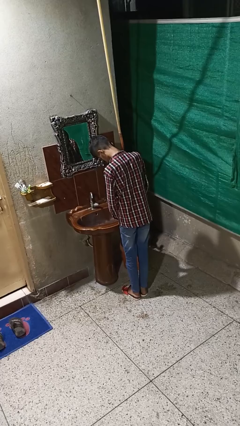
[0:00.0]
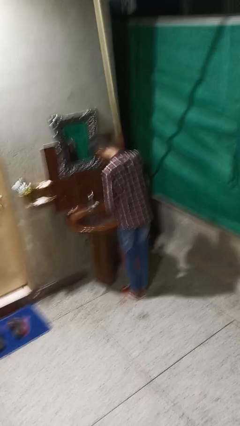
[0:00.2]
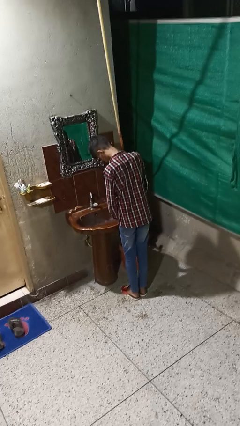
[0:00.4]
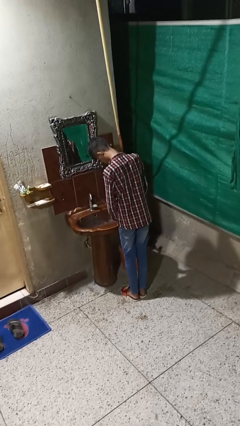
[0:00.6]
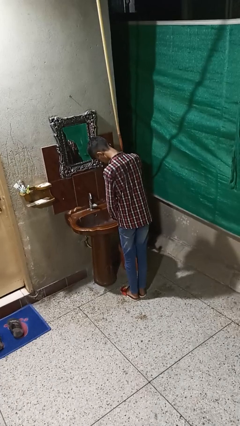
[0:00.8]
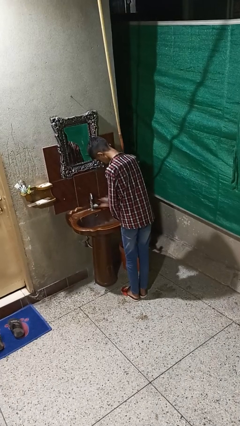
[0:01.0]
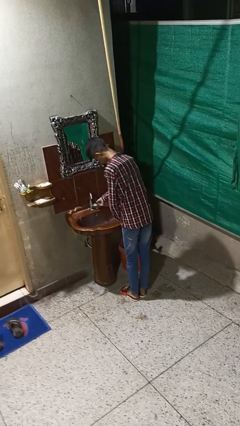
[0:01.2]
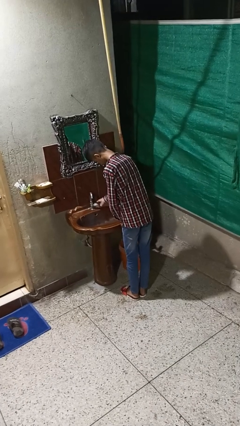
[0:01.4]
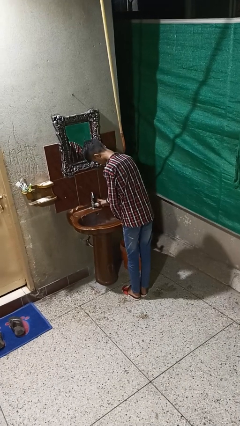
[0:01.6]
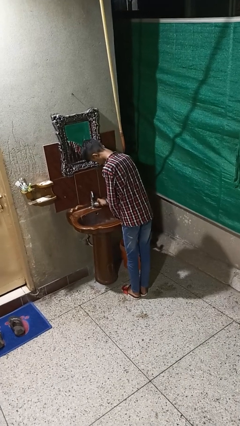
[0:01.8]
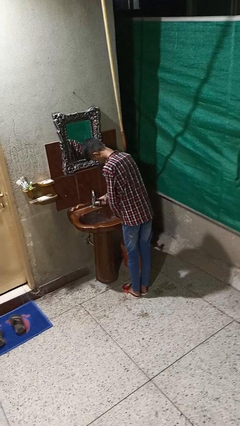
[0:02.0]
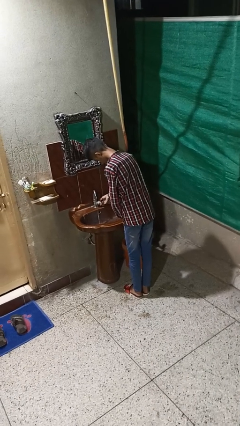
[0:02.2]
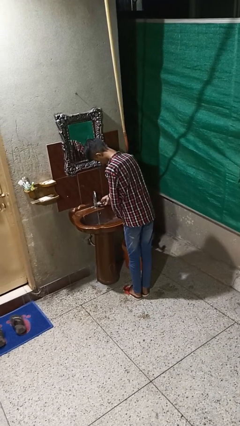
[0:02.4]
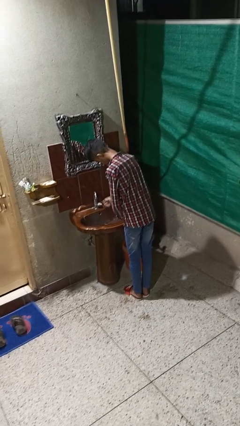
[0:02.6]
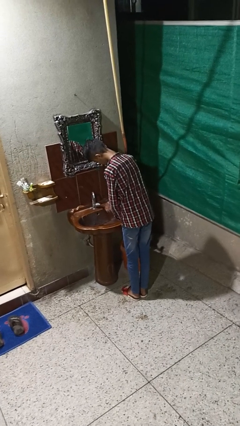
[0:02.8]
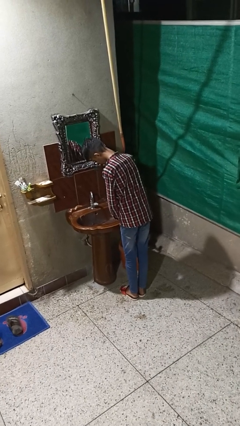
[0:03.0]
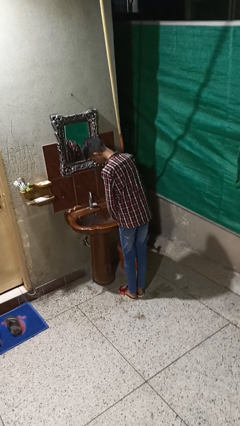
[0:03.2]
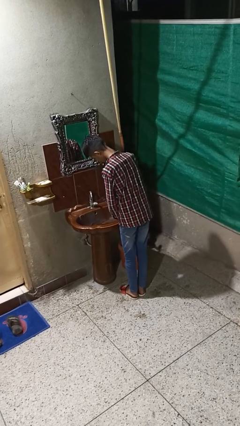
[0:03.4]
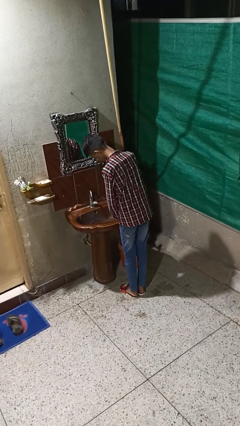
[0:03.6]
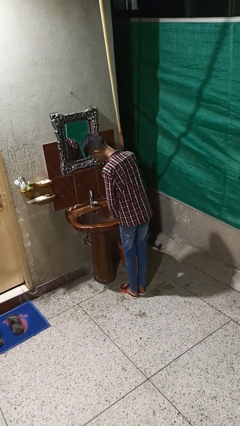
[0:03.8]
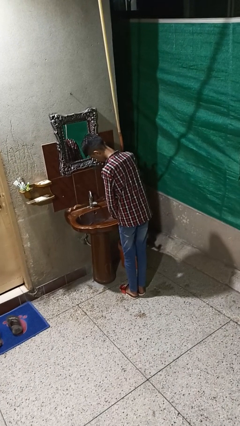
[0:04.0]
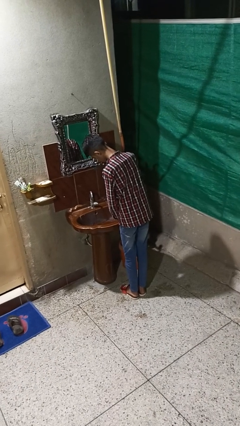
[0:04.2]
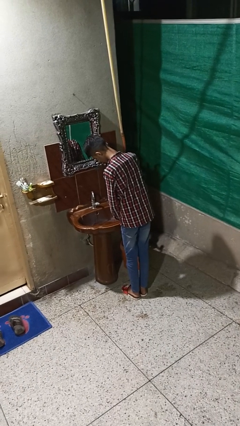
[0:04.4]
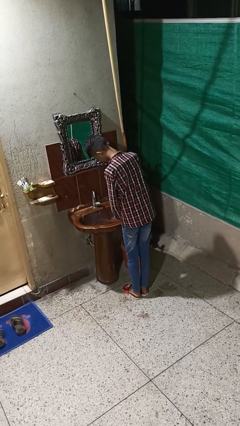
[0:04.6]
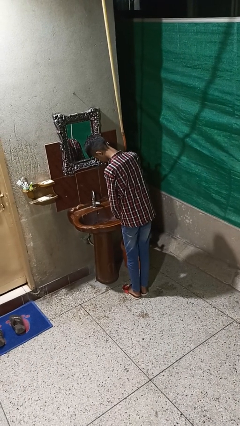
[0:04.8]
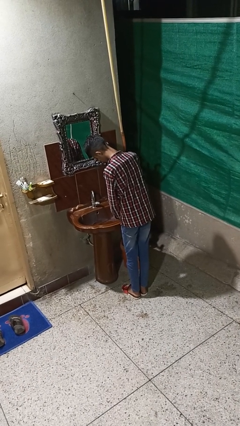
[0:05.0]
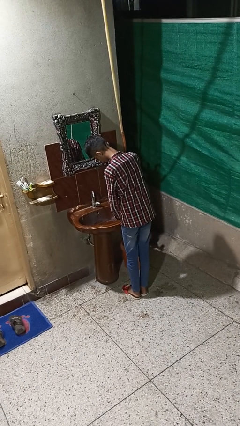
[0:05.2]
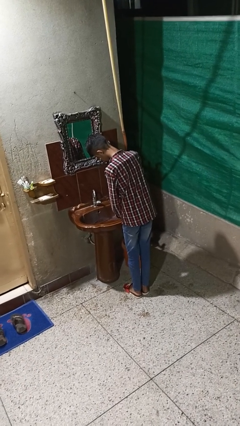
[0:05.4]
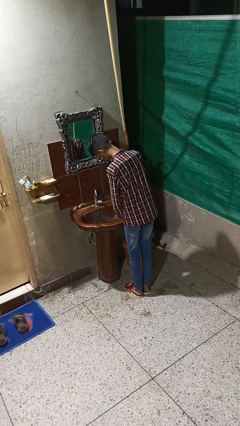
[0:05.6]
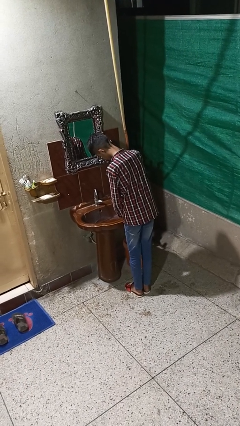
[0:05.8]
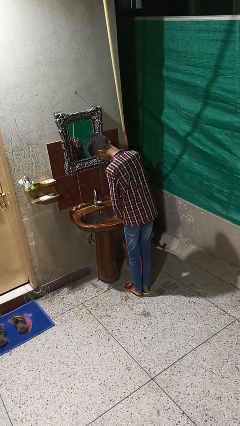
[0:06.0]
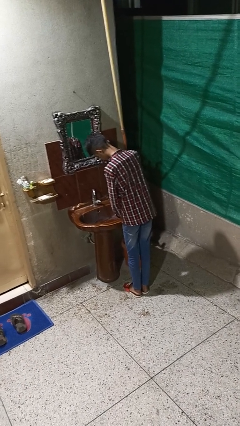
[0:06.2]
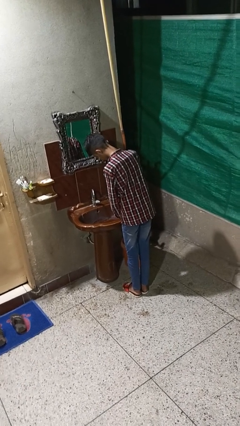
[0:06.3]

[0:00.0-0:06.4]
person turns on faucet

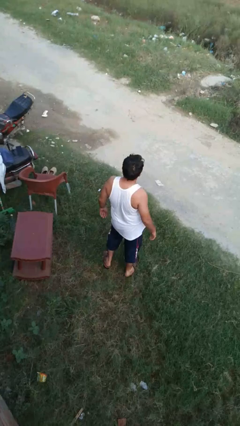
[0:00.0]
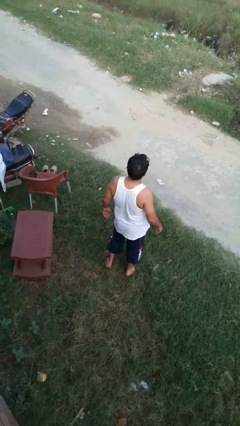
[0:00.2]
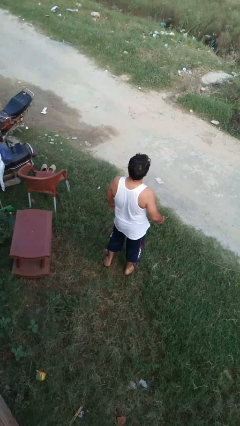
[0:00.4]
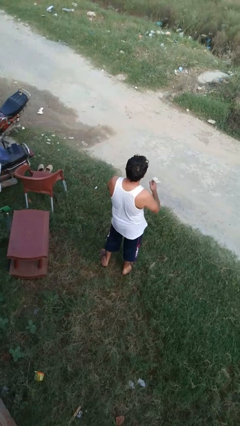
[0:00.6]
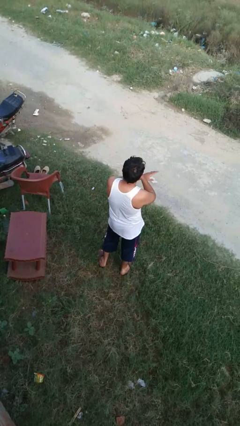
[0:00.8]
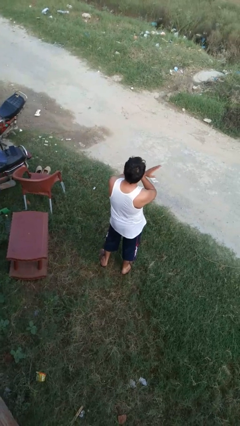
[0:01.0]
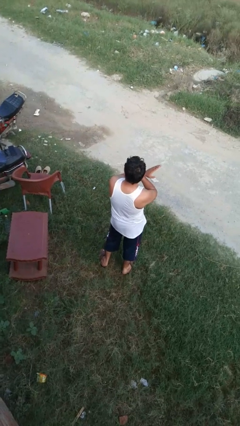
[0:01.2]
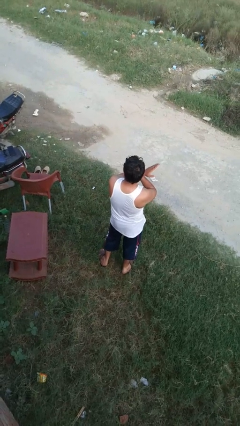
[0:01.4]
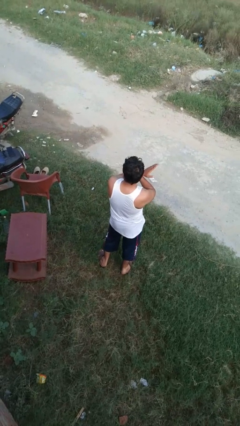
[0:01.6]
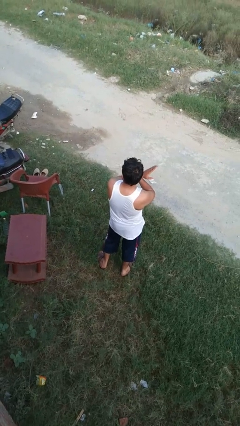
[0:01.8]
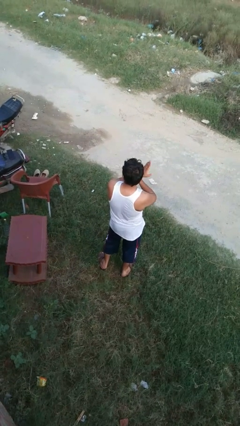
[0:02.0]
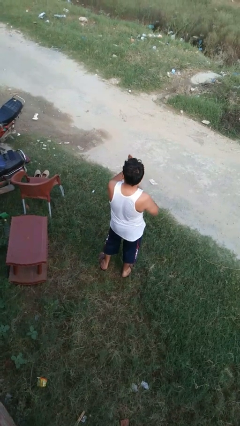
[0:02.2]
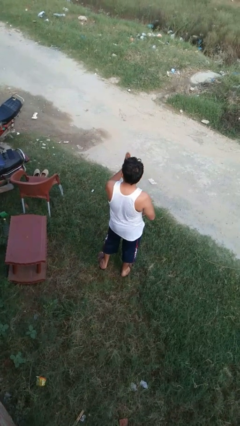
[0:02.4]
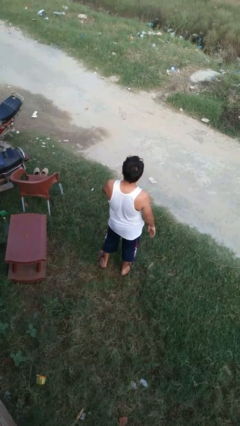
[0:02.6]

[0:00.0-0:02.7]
person karate chop

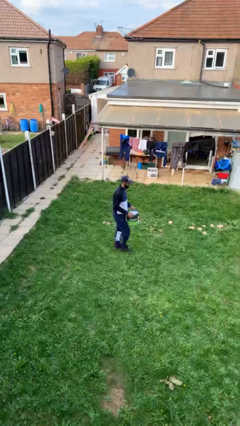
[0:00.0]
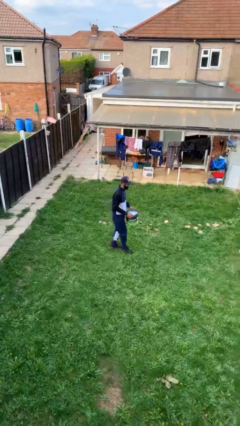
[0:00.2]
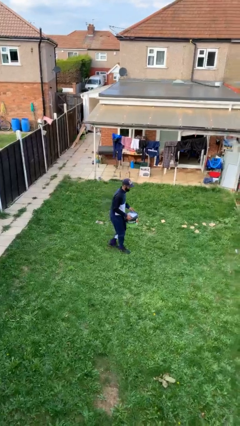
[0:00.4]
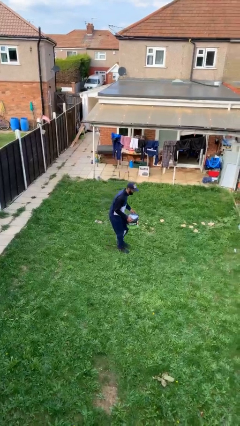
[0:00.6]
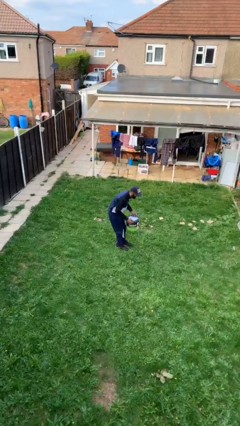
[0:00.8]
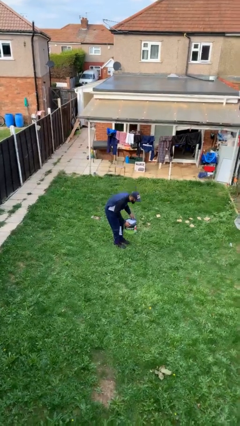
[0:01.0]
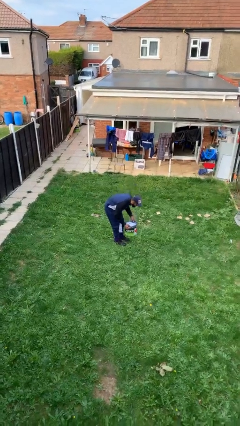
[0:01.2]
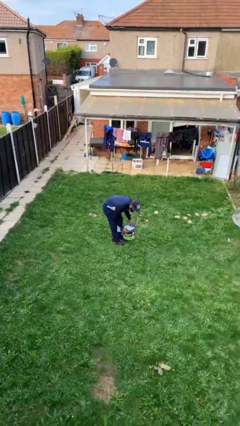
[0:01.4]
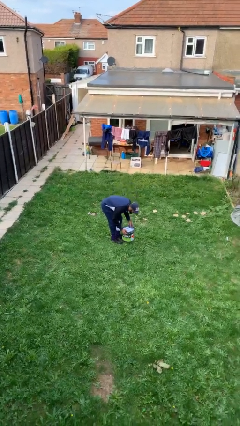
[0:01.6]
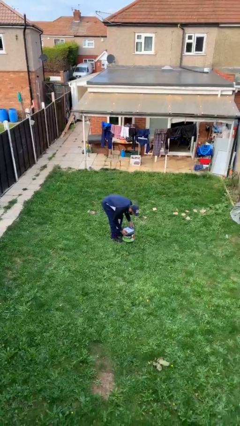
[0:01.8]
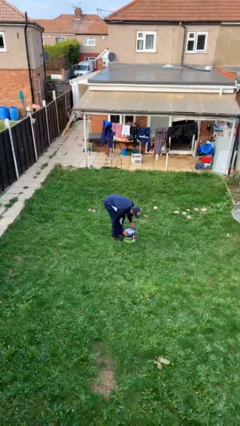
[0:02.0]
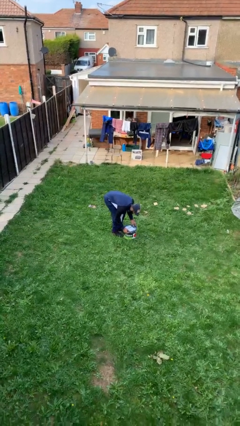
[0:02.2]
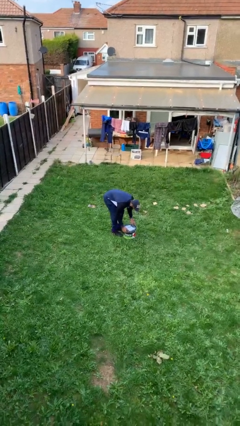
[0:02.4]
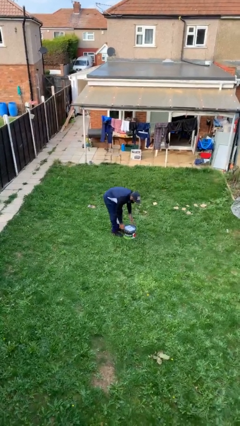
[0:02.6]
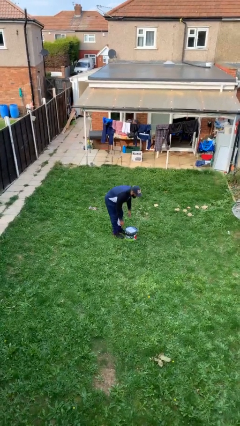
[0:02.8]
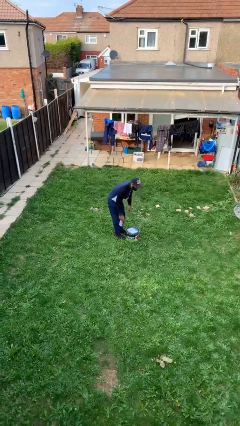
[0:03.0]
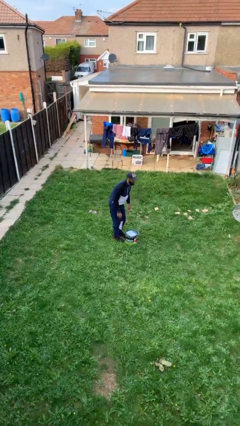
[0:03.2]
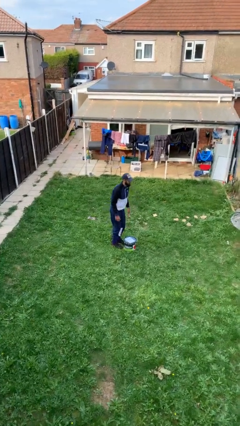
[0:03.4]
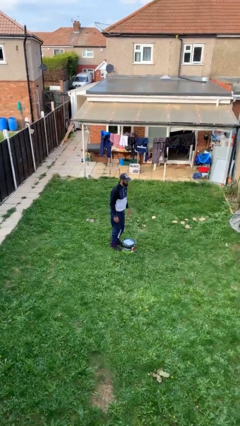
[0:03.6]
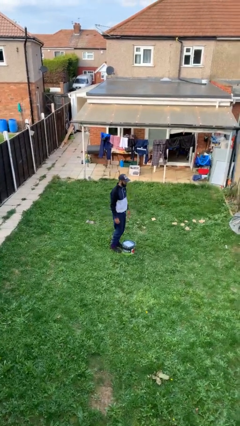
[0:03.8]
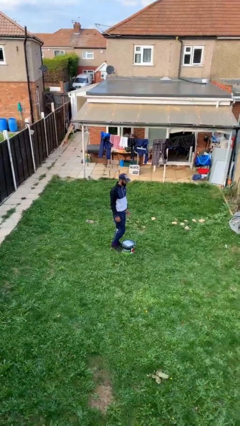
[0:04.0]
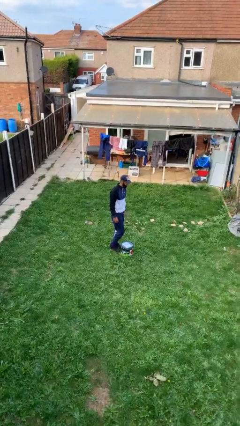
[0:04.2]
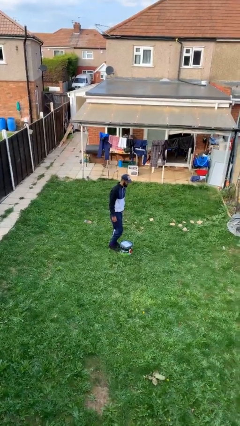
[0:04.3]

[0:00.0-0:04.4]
person puts down object on floor

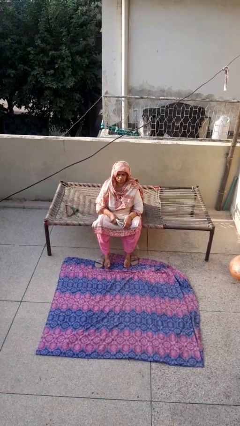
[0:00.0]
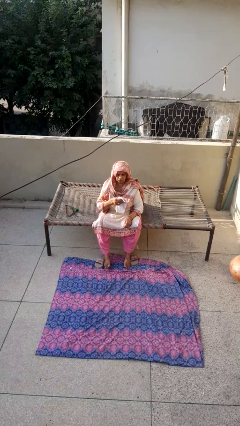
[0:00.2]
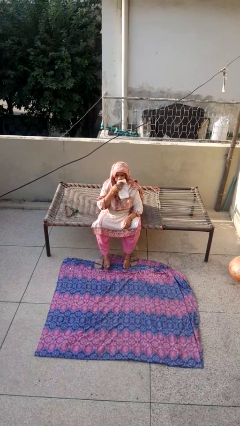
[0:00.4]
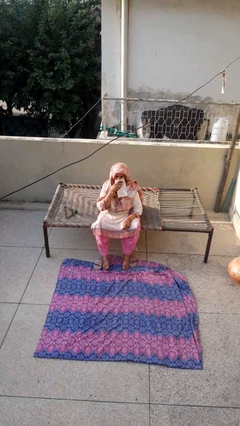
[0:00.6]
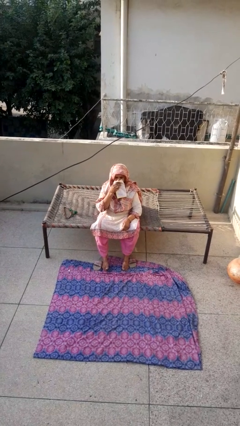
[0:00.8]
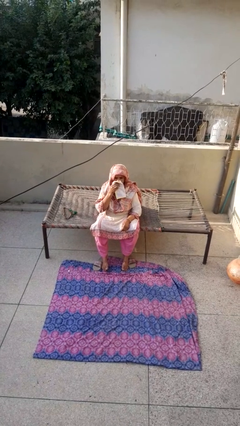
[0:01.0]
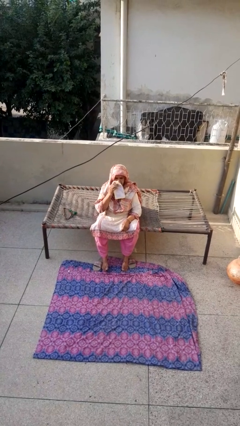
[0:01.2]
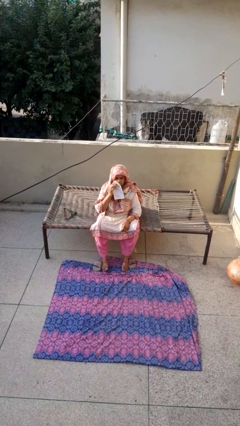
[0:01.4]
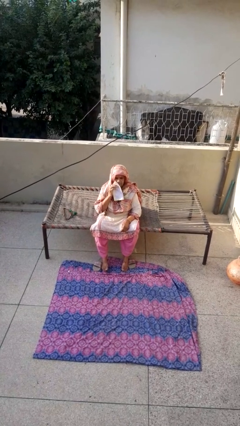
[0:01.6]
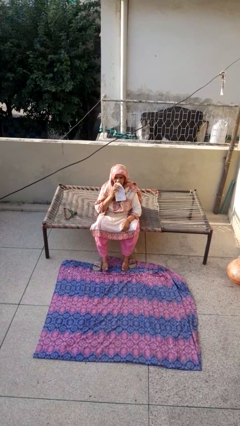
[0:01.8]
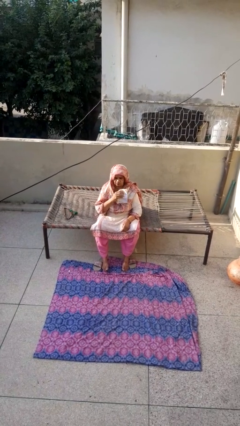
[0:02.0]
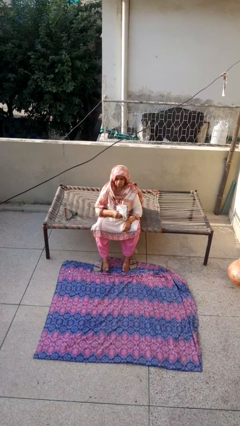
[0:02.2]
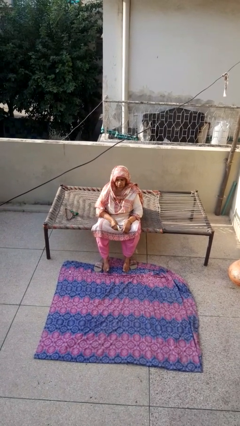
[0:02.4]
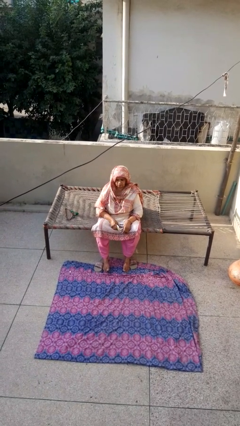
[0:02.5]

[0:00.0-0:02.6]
person wipes mouth with napkin

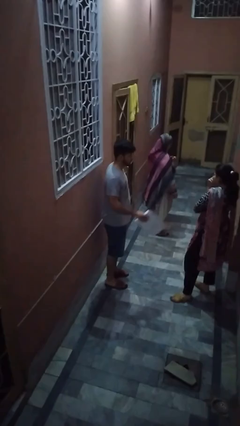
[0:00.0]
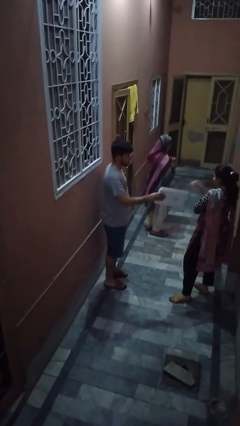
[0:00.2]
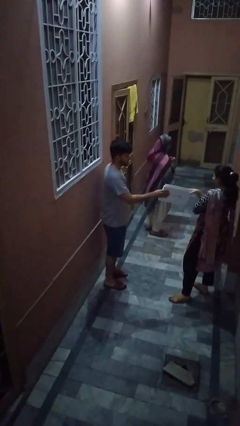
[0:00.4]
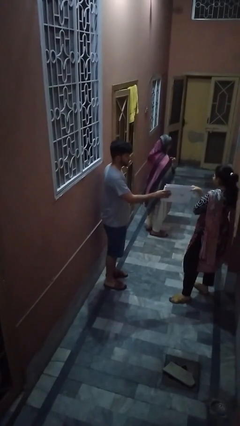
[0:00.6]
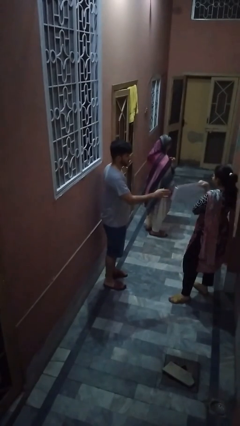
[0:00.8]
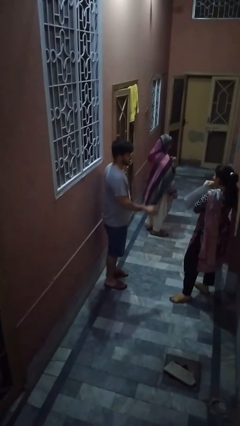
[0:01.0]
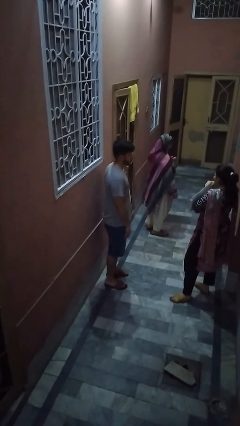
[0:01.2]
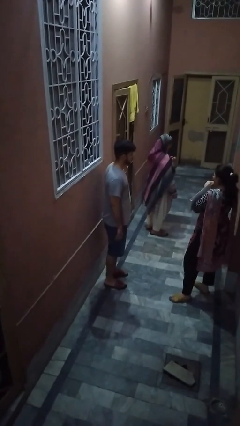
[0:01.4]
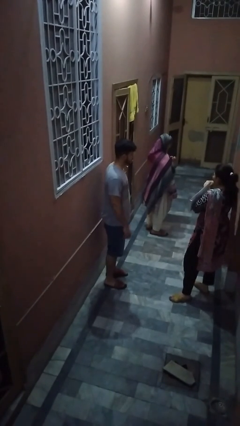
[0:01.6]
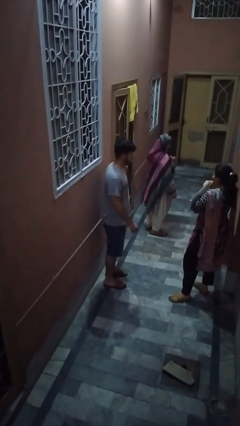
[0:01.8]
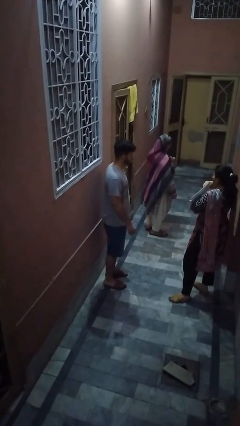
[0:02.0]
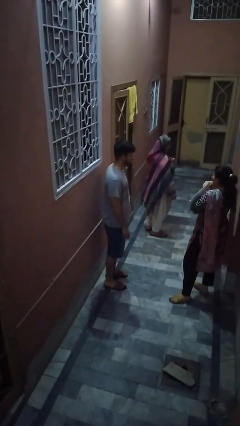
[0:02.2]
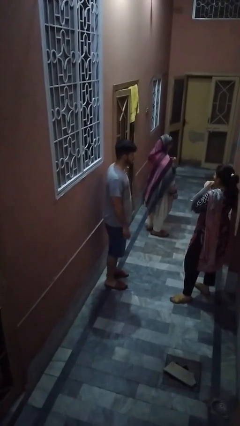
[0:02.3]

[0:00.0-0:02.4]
person transfers object to person
